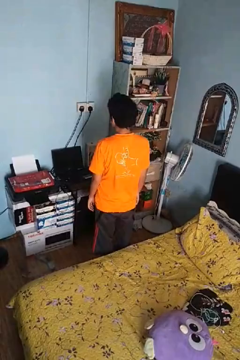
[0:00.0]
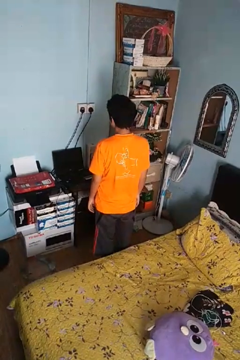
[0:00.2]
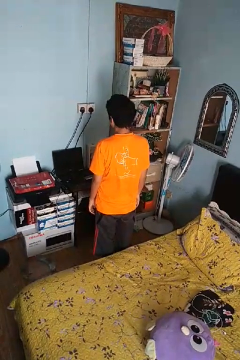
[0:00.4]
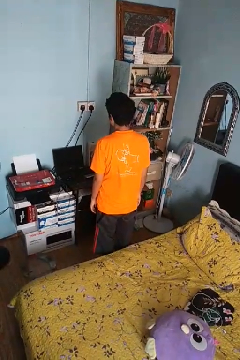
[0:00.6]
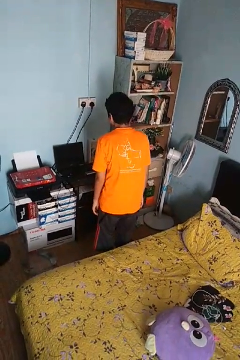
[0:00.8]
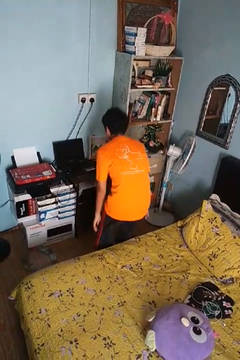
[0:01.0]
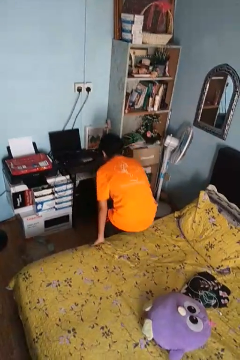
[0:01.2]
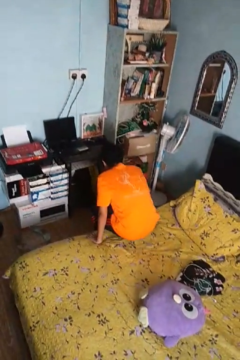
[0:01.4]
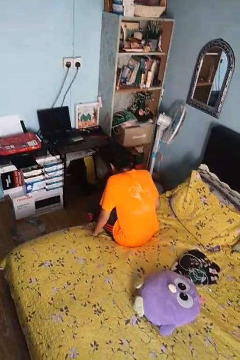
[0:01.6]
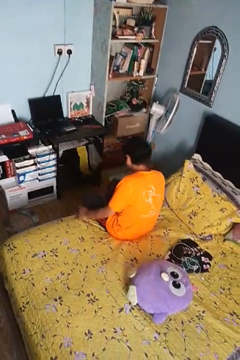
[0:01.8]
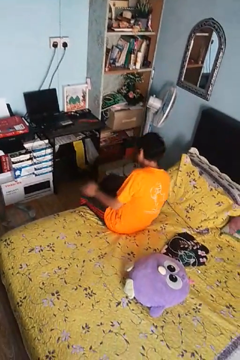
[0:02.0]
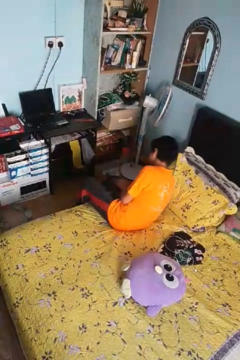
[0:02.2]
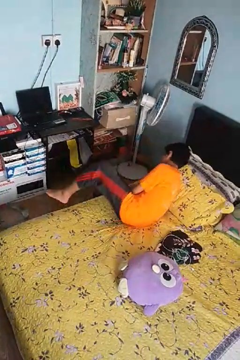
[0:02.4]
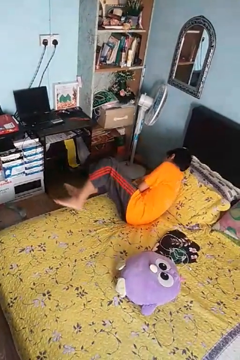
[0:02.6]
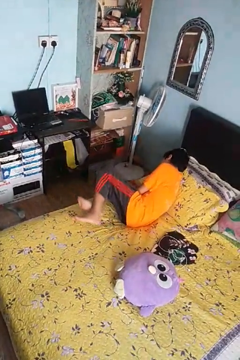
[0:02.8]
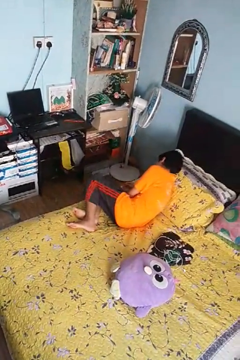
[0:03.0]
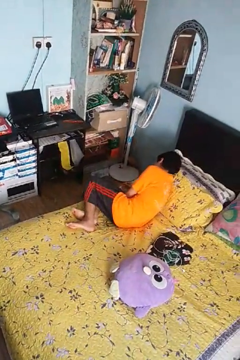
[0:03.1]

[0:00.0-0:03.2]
person lies down on bed

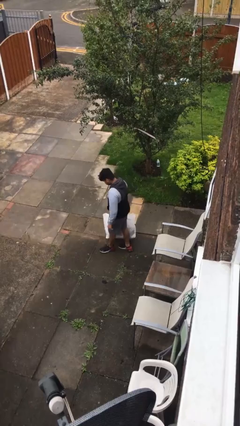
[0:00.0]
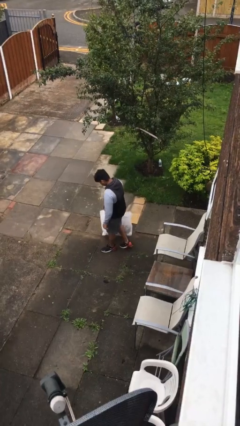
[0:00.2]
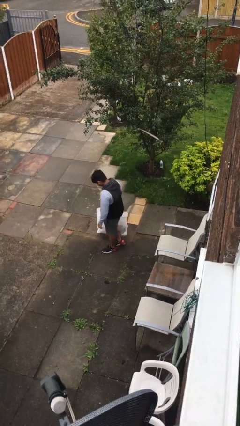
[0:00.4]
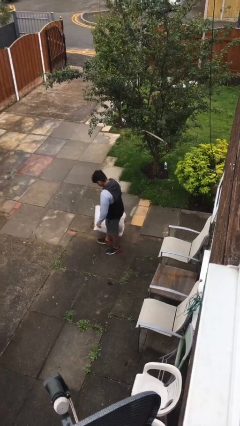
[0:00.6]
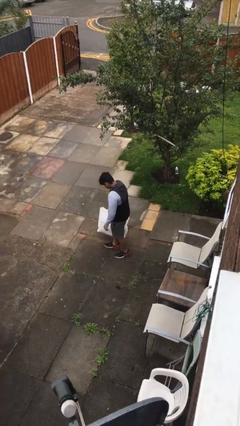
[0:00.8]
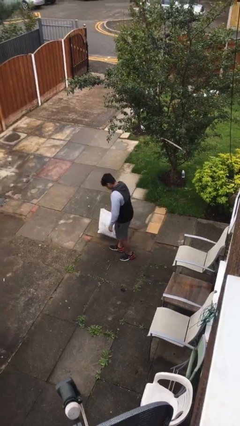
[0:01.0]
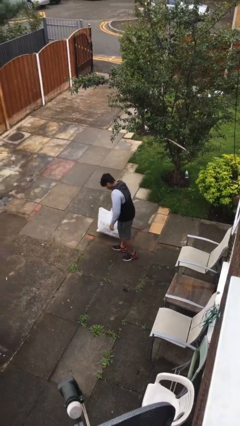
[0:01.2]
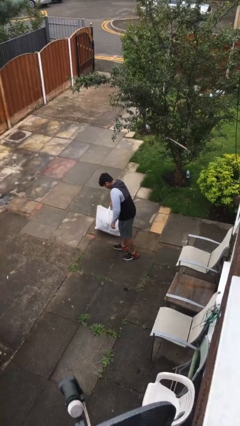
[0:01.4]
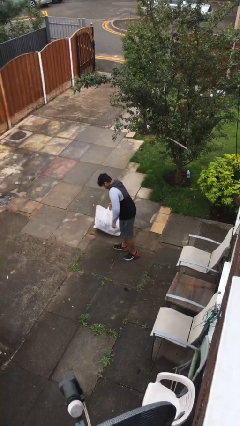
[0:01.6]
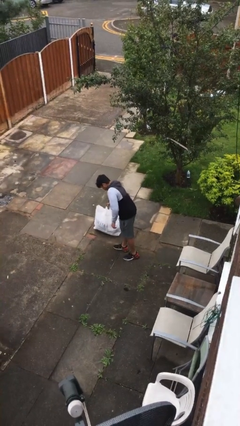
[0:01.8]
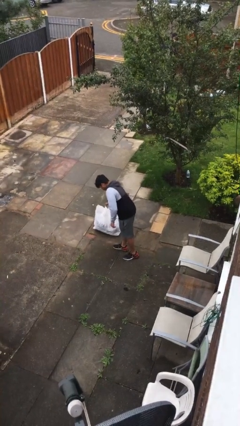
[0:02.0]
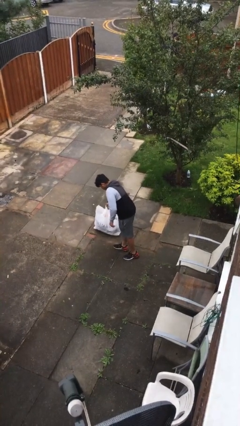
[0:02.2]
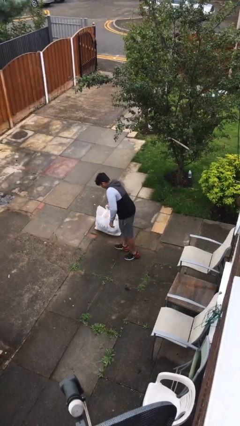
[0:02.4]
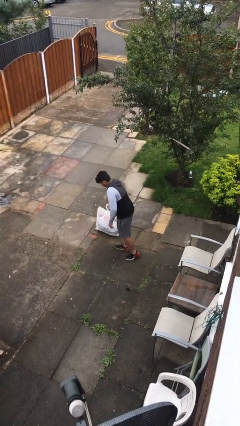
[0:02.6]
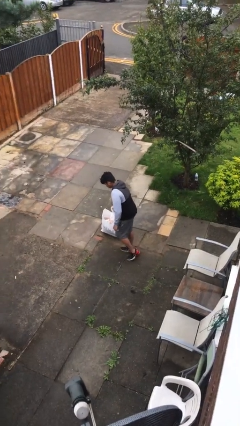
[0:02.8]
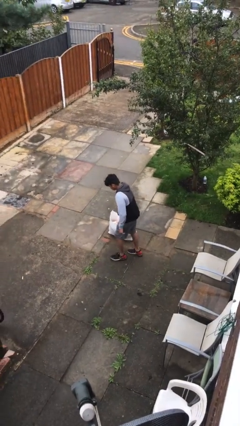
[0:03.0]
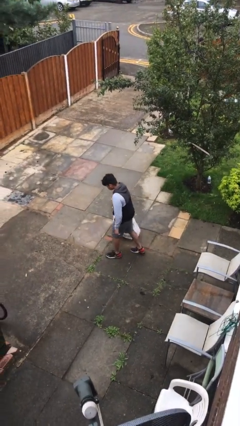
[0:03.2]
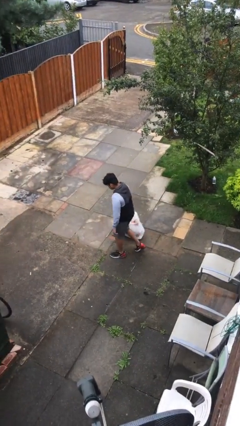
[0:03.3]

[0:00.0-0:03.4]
person puts down object on floor

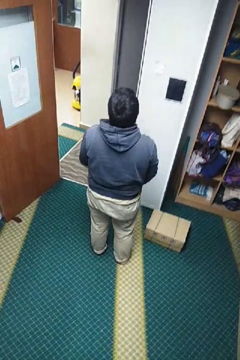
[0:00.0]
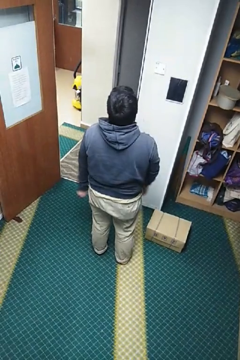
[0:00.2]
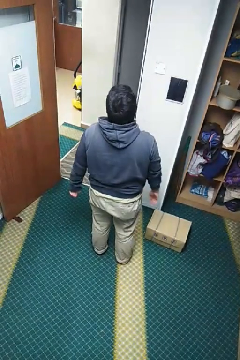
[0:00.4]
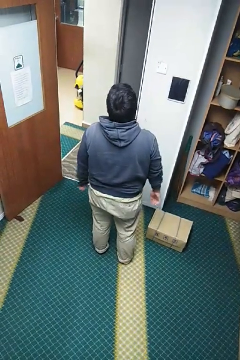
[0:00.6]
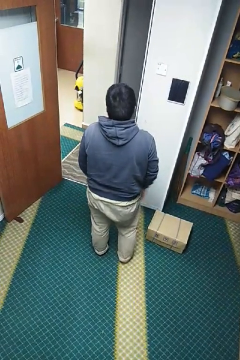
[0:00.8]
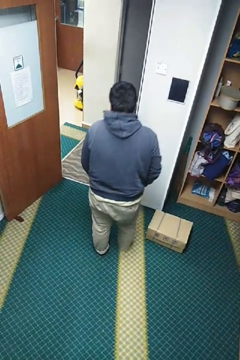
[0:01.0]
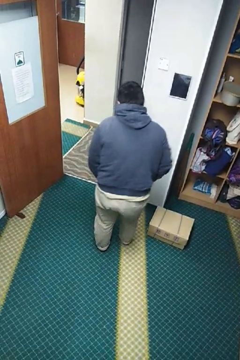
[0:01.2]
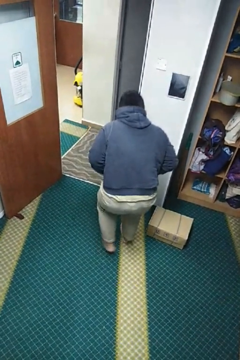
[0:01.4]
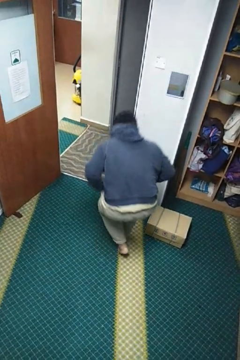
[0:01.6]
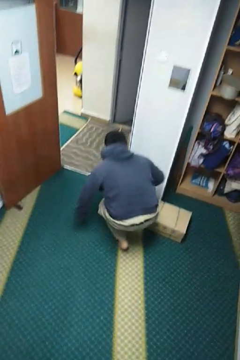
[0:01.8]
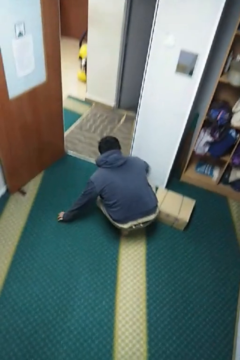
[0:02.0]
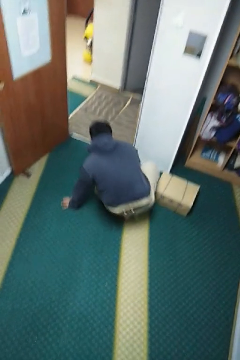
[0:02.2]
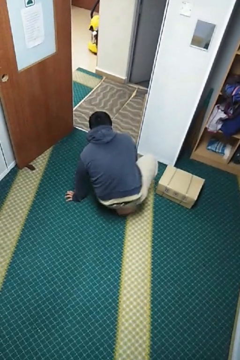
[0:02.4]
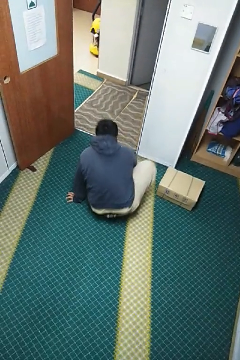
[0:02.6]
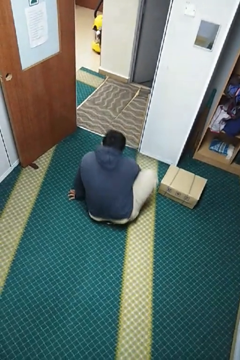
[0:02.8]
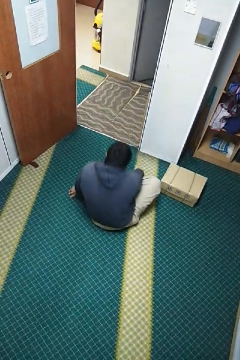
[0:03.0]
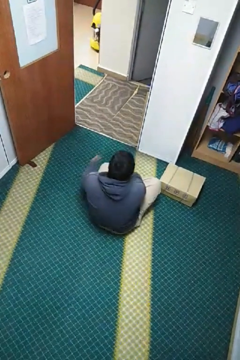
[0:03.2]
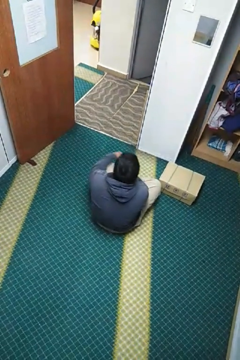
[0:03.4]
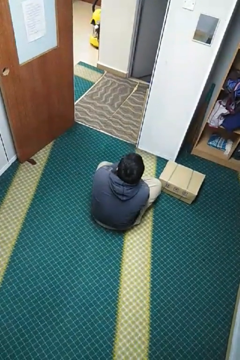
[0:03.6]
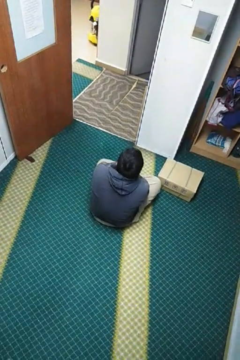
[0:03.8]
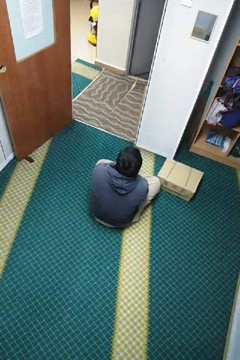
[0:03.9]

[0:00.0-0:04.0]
person sits crisscross

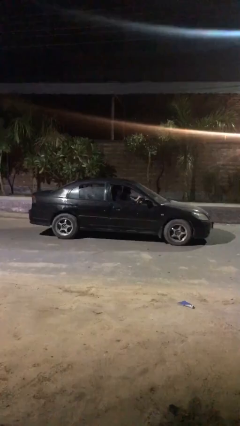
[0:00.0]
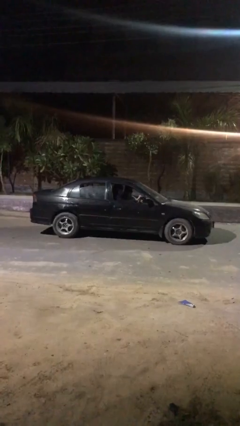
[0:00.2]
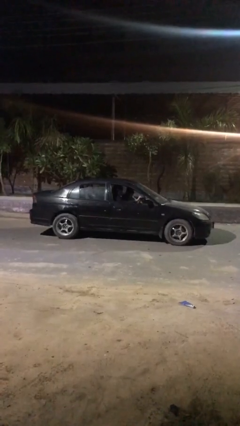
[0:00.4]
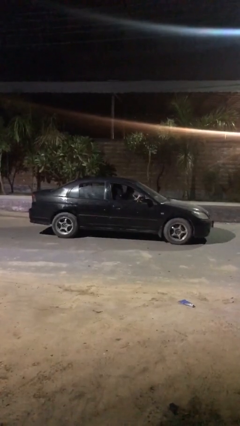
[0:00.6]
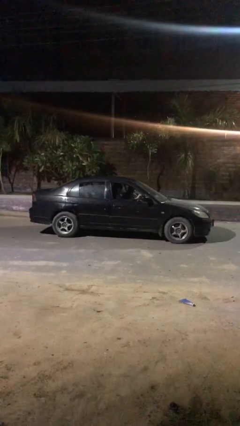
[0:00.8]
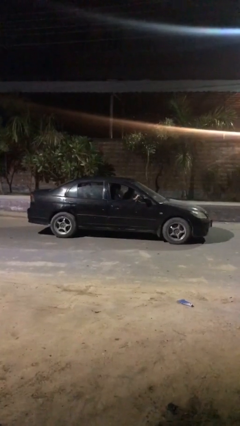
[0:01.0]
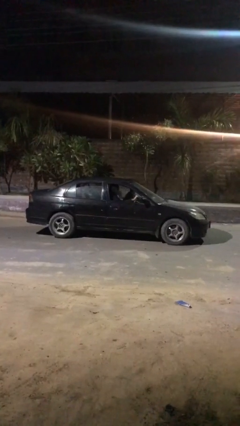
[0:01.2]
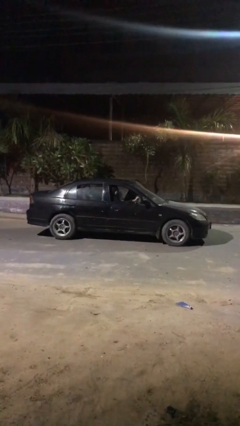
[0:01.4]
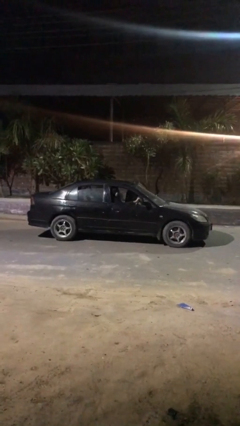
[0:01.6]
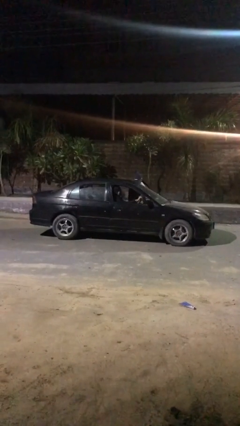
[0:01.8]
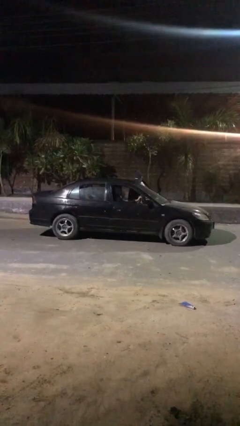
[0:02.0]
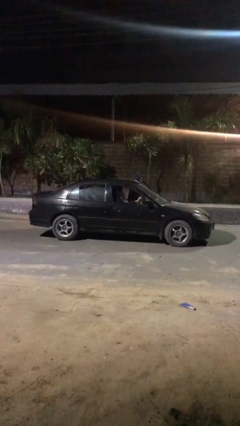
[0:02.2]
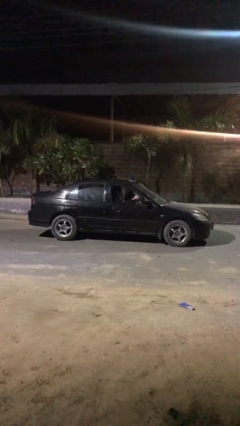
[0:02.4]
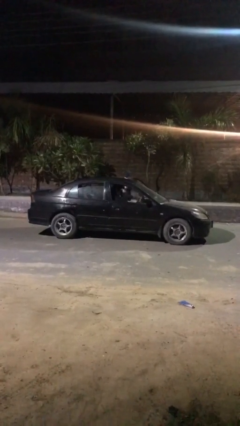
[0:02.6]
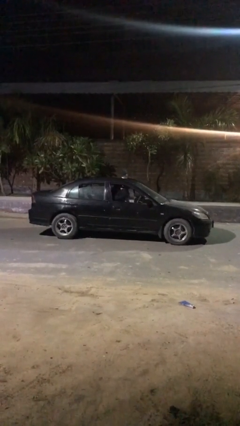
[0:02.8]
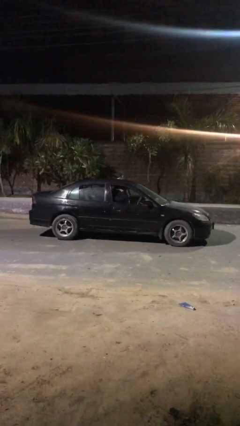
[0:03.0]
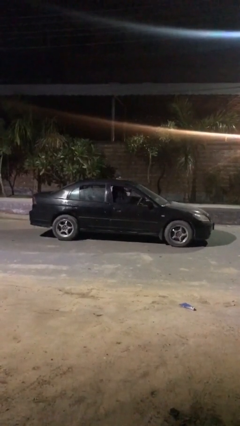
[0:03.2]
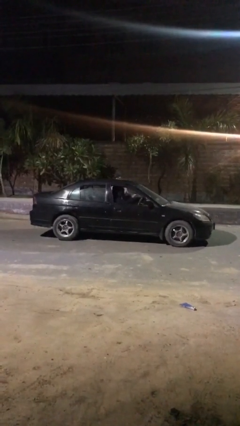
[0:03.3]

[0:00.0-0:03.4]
car drops off person

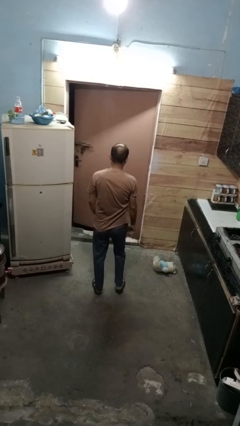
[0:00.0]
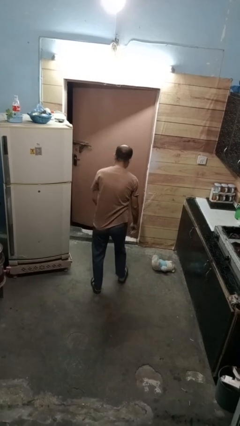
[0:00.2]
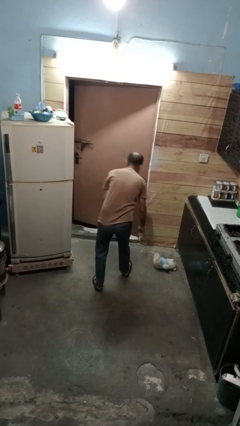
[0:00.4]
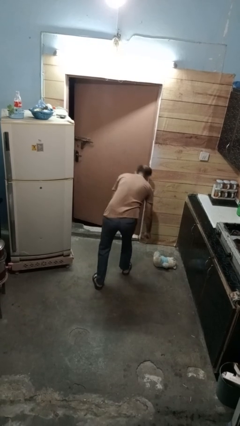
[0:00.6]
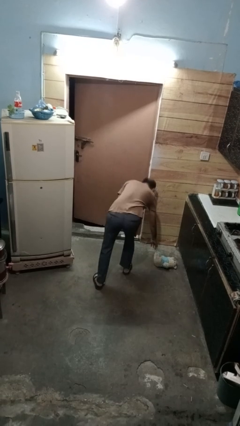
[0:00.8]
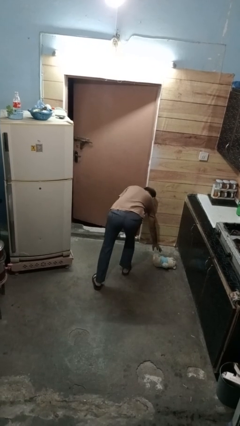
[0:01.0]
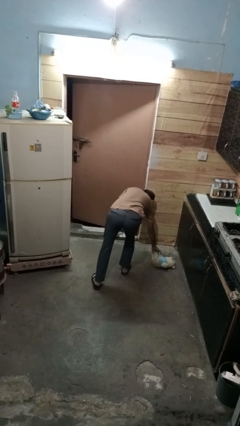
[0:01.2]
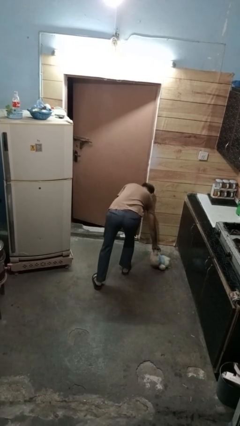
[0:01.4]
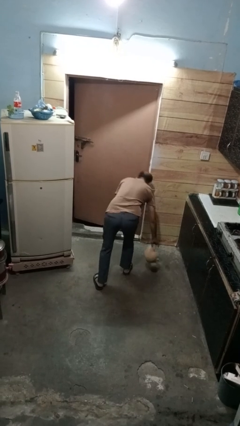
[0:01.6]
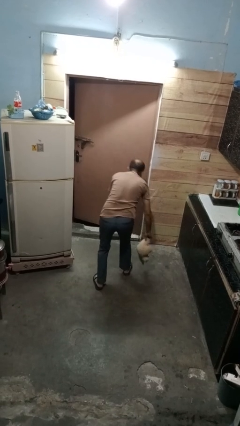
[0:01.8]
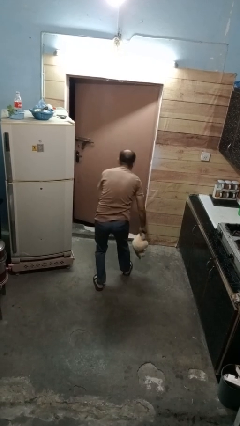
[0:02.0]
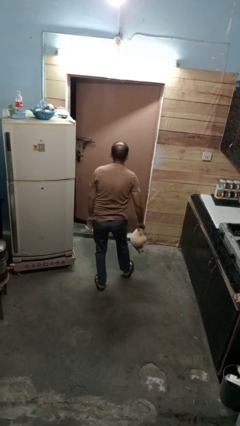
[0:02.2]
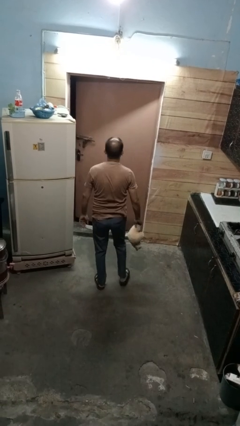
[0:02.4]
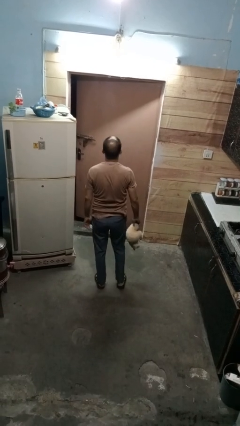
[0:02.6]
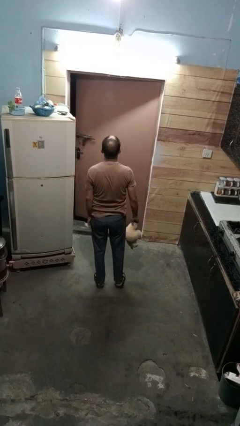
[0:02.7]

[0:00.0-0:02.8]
person picks up object from floor

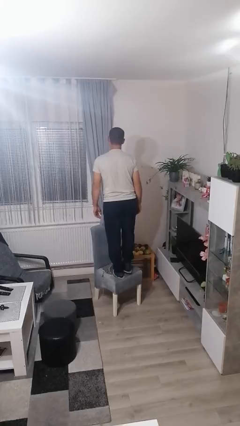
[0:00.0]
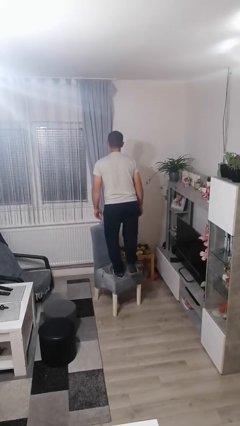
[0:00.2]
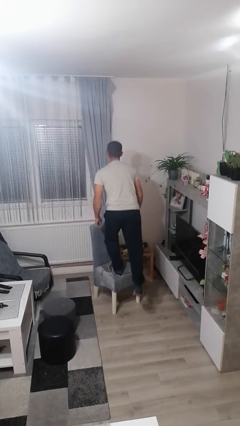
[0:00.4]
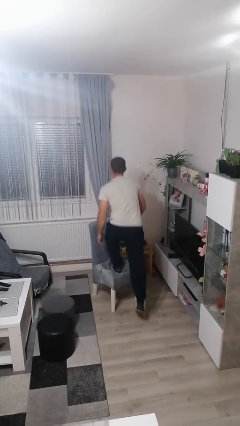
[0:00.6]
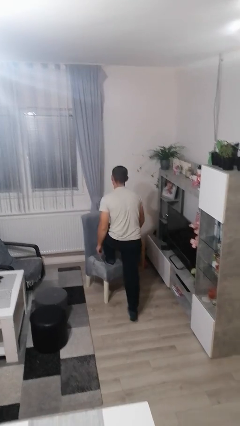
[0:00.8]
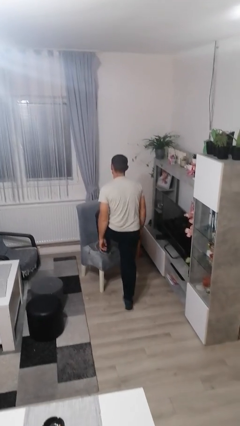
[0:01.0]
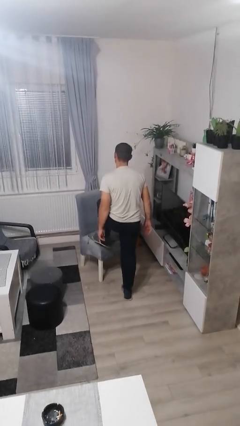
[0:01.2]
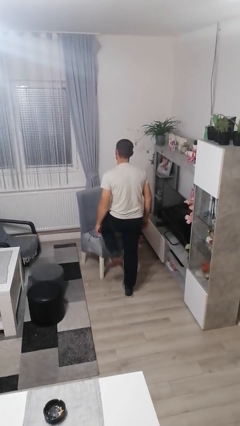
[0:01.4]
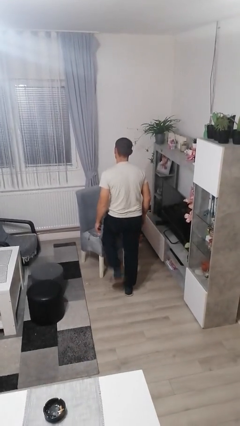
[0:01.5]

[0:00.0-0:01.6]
person climbs off chair
